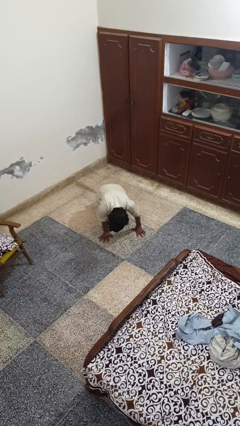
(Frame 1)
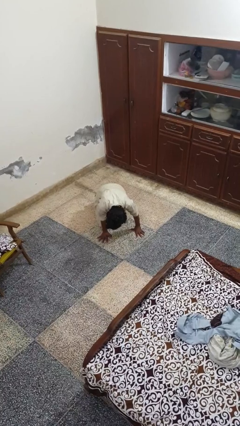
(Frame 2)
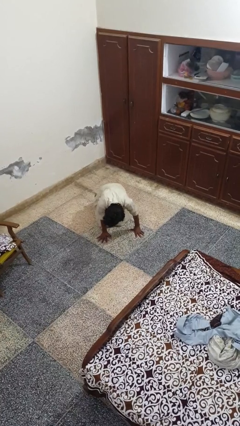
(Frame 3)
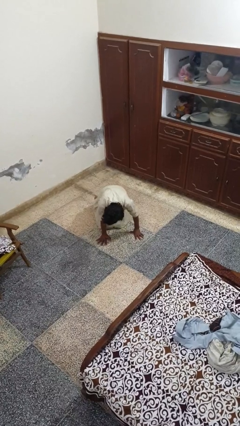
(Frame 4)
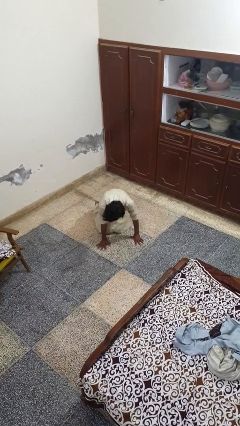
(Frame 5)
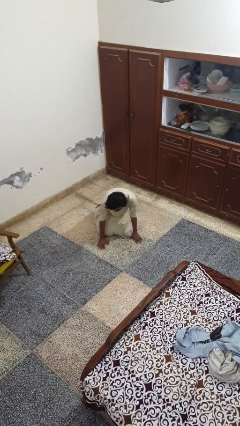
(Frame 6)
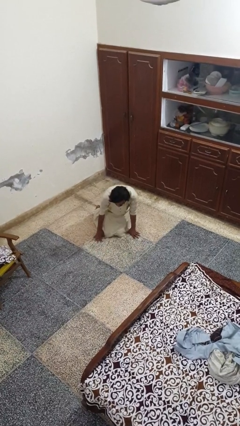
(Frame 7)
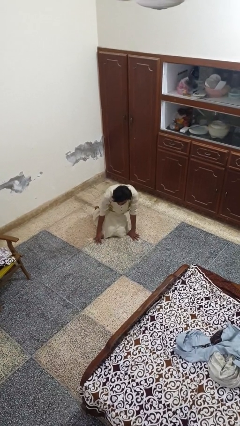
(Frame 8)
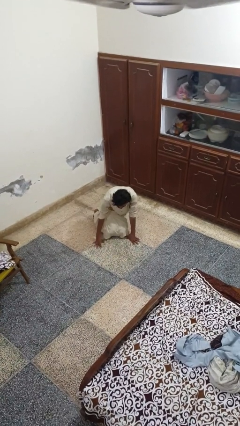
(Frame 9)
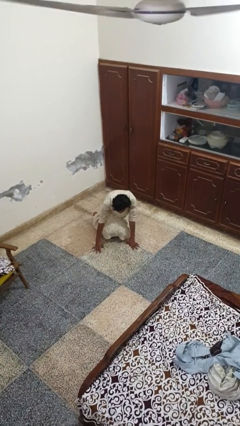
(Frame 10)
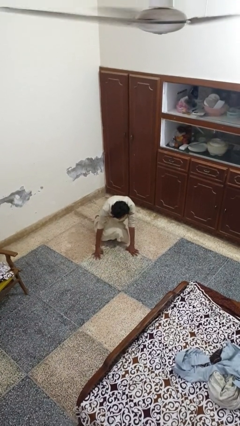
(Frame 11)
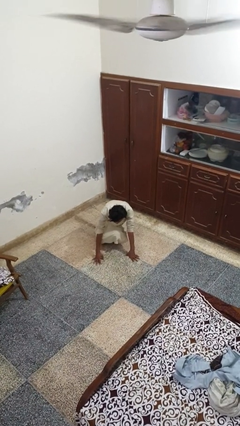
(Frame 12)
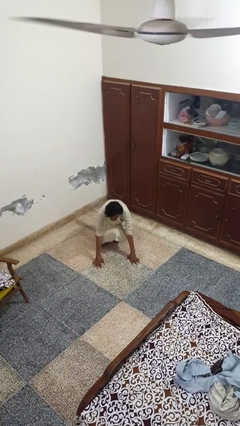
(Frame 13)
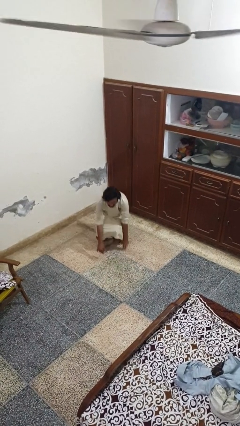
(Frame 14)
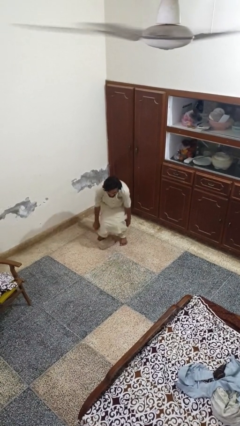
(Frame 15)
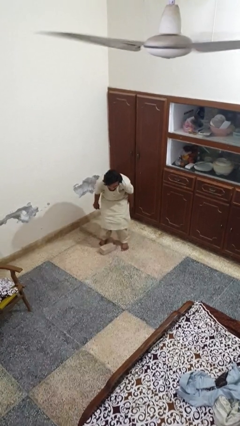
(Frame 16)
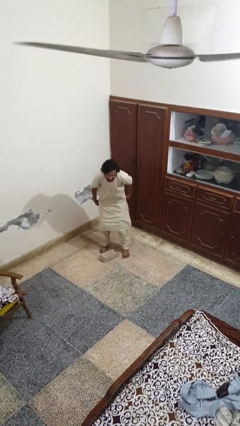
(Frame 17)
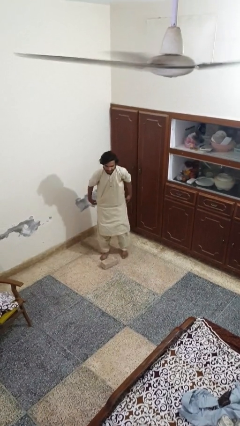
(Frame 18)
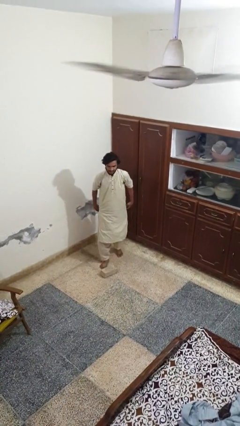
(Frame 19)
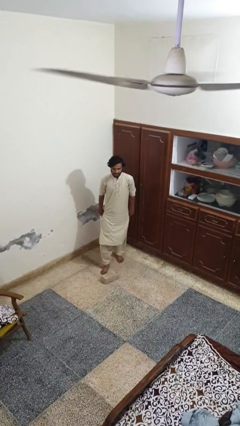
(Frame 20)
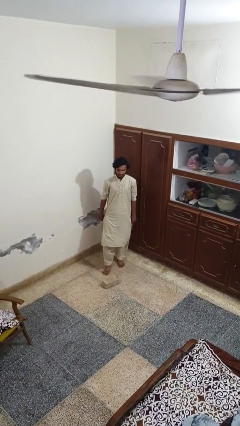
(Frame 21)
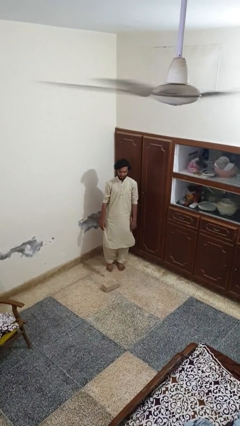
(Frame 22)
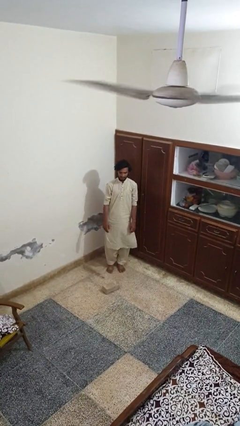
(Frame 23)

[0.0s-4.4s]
person stands up from floor

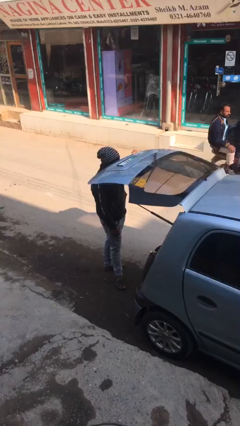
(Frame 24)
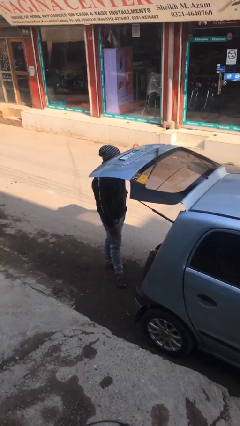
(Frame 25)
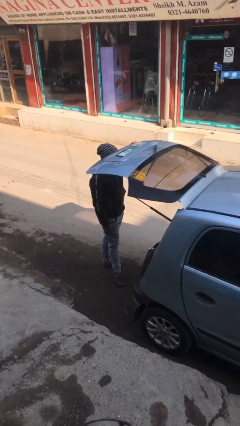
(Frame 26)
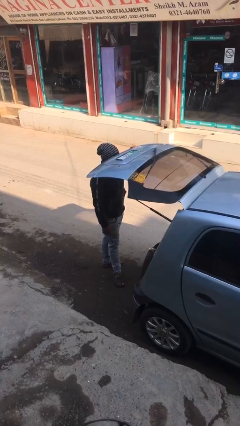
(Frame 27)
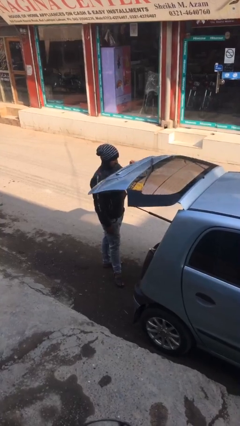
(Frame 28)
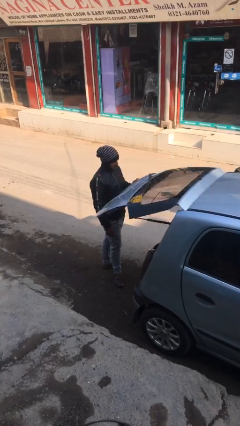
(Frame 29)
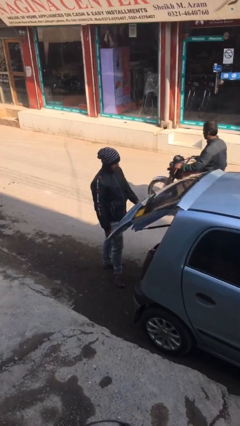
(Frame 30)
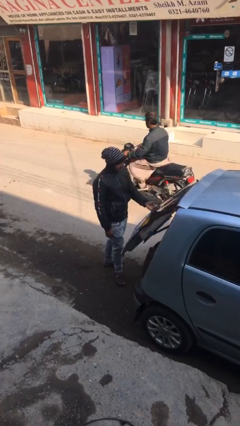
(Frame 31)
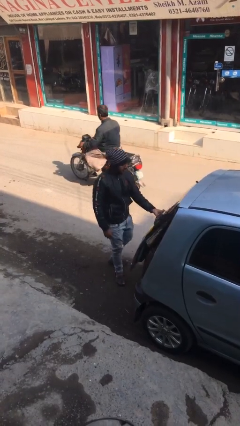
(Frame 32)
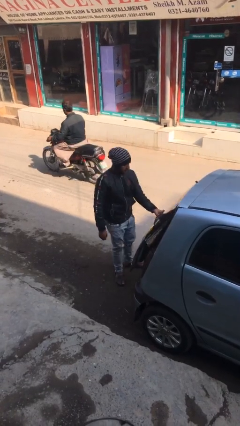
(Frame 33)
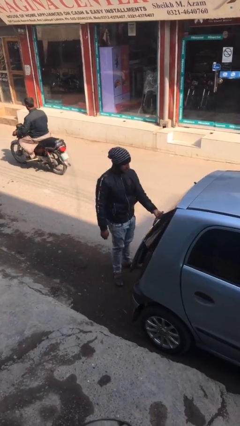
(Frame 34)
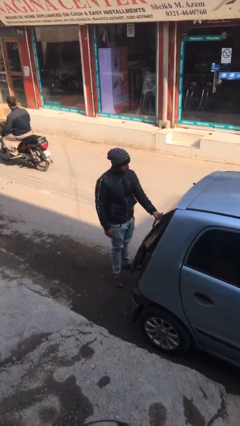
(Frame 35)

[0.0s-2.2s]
person closes car trunk

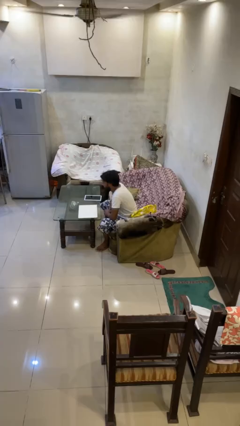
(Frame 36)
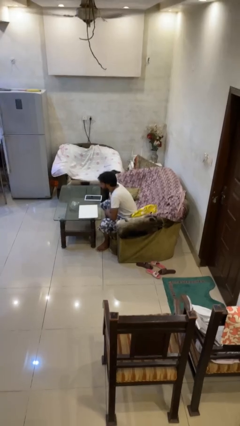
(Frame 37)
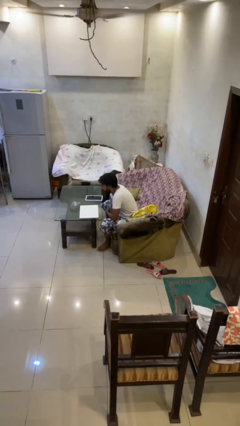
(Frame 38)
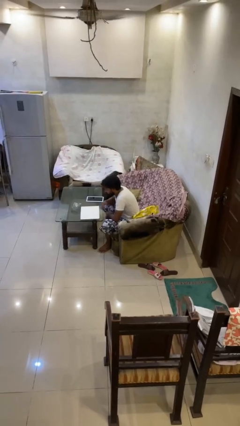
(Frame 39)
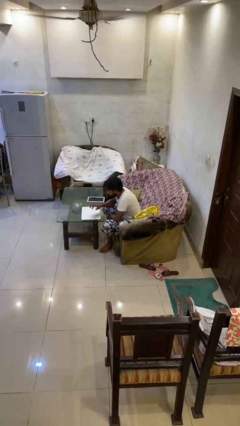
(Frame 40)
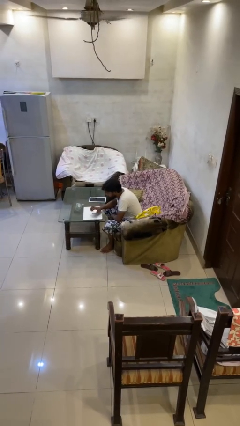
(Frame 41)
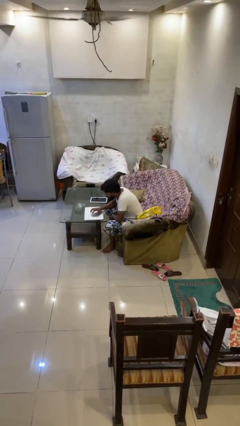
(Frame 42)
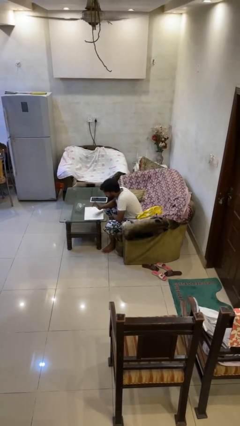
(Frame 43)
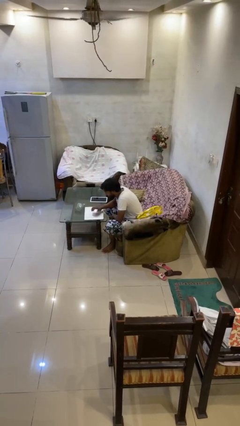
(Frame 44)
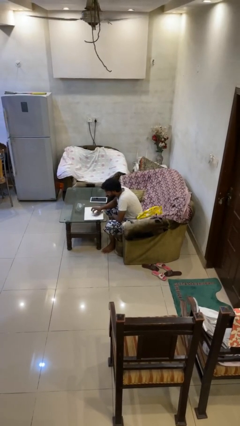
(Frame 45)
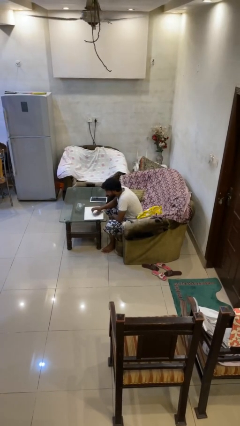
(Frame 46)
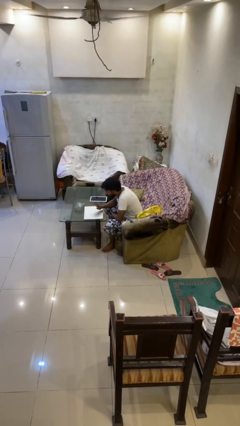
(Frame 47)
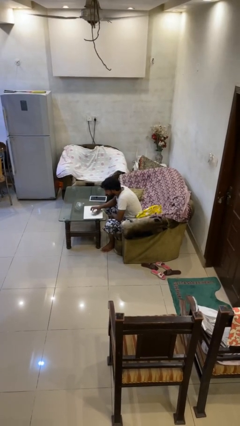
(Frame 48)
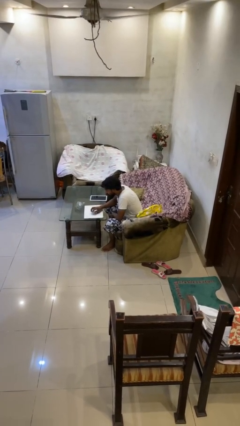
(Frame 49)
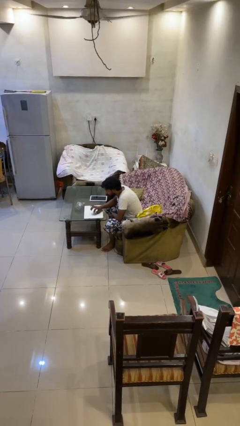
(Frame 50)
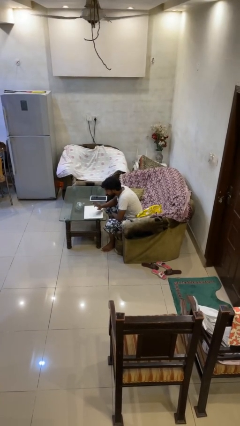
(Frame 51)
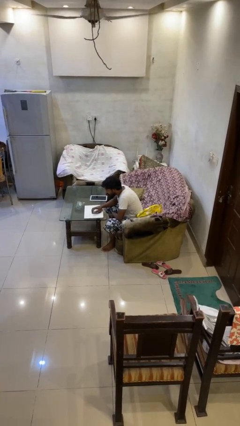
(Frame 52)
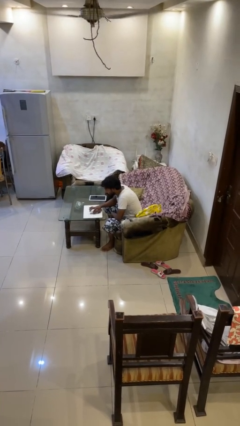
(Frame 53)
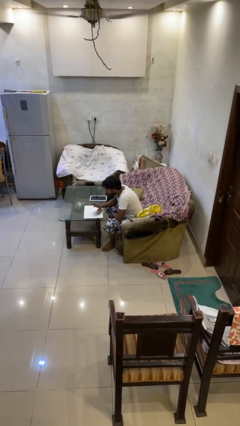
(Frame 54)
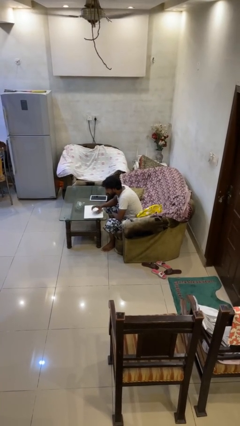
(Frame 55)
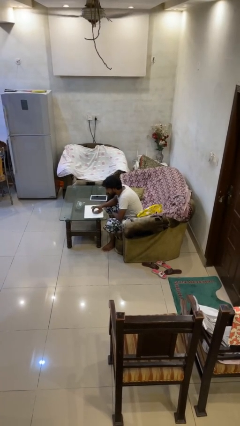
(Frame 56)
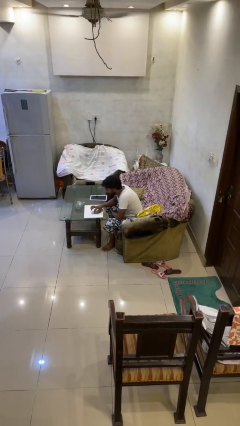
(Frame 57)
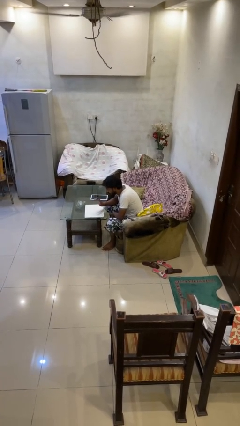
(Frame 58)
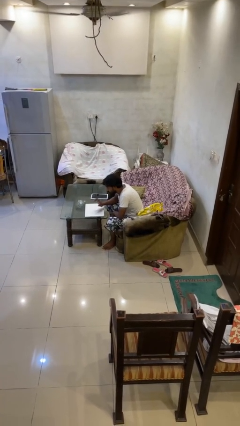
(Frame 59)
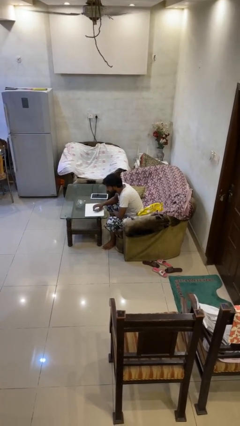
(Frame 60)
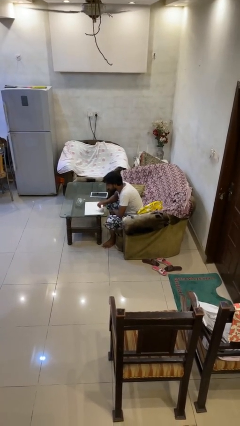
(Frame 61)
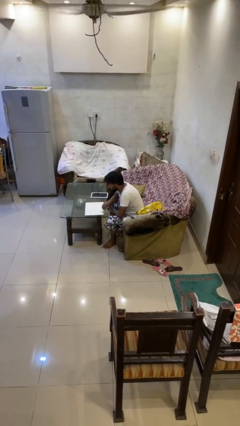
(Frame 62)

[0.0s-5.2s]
person taps object with finger

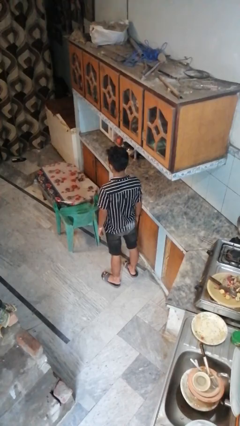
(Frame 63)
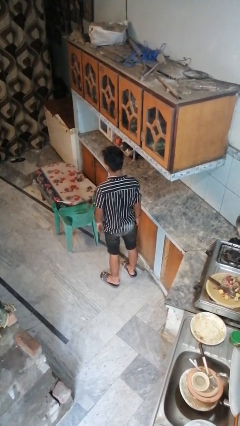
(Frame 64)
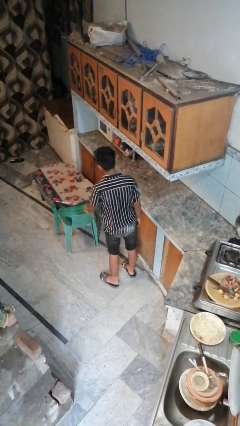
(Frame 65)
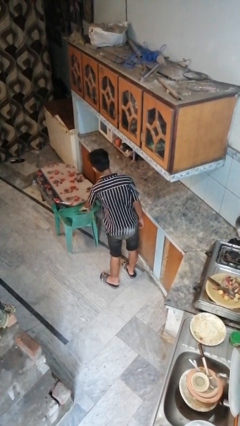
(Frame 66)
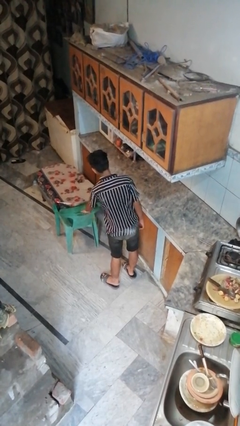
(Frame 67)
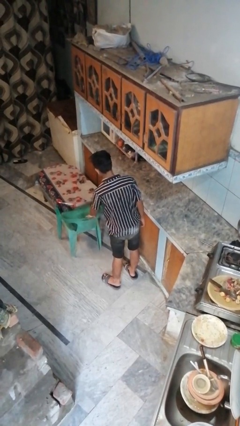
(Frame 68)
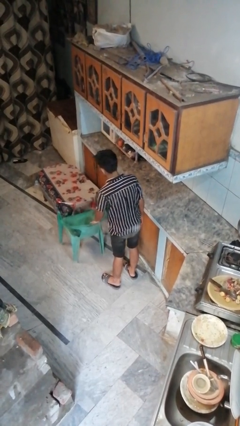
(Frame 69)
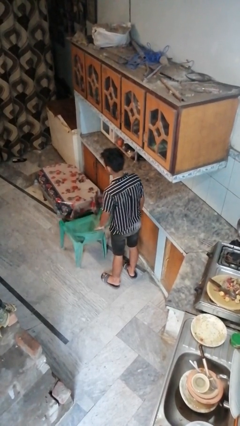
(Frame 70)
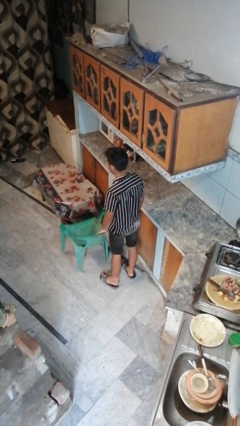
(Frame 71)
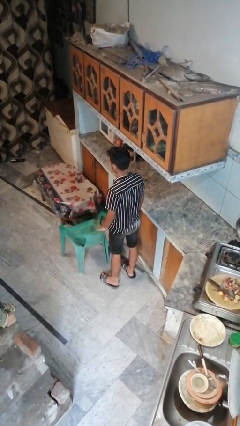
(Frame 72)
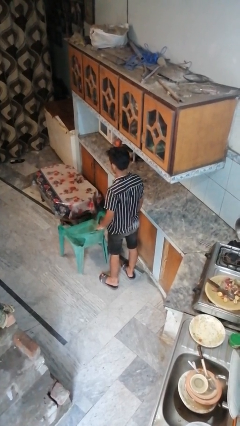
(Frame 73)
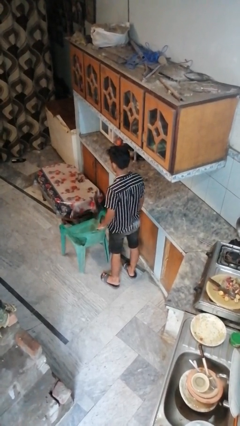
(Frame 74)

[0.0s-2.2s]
person pulls out chair

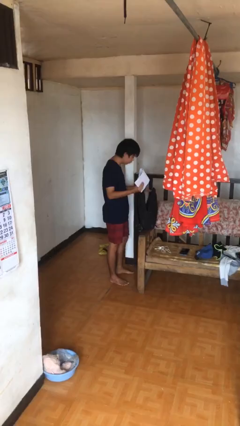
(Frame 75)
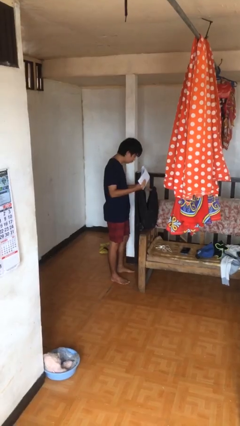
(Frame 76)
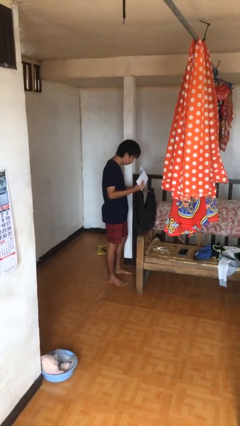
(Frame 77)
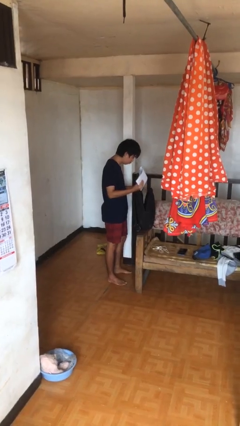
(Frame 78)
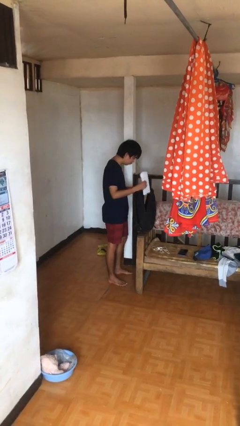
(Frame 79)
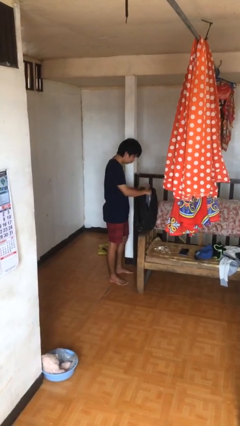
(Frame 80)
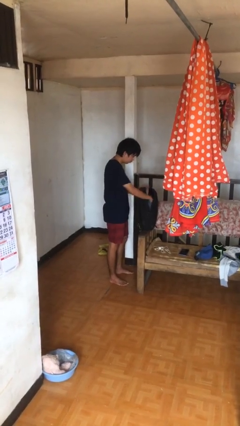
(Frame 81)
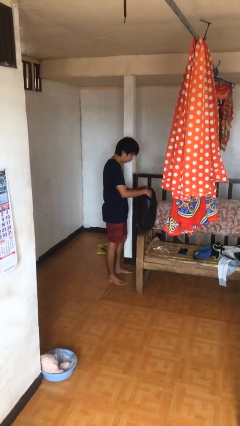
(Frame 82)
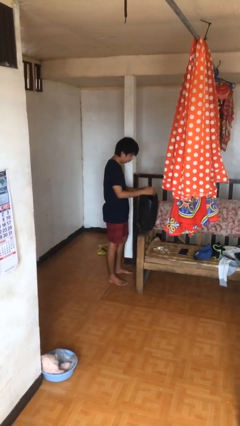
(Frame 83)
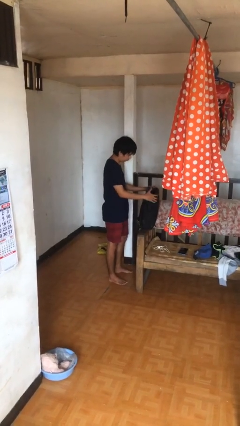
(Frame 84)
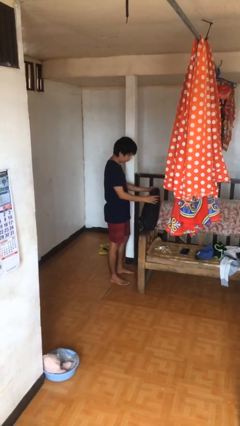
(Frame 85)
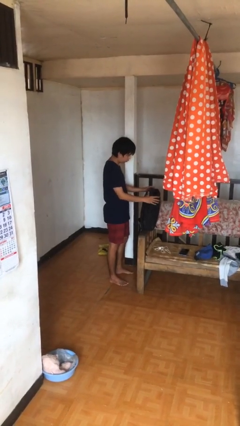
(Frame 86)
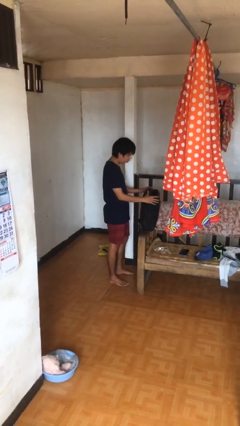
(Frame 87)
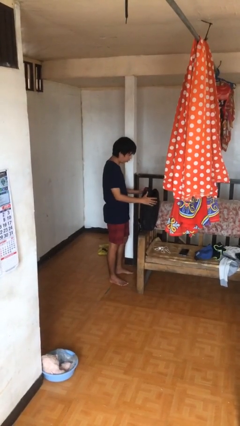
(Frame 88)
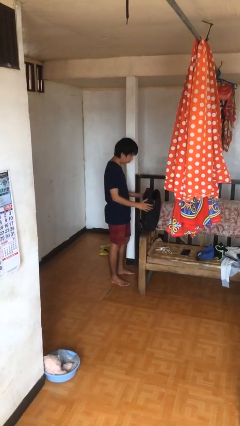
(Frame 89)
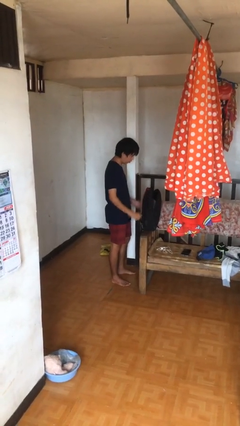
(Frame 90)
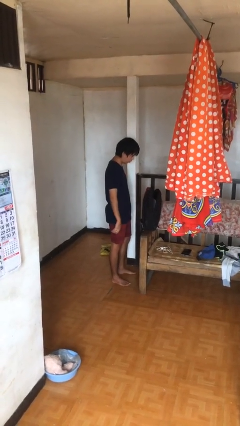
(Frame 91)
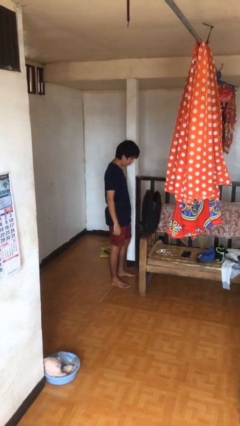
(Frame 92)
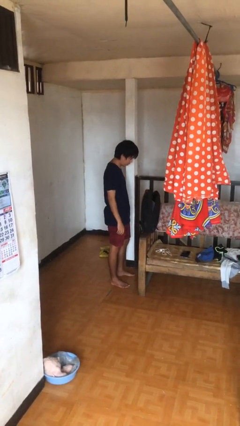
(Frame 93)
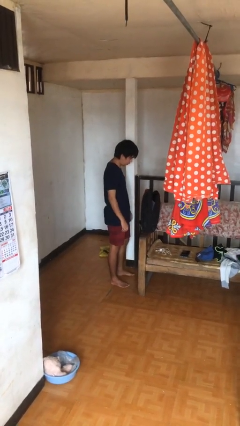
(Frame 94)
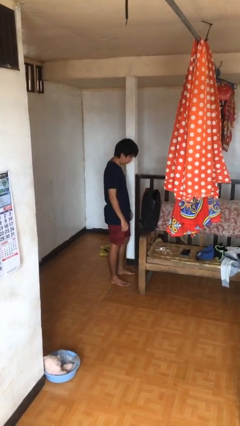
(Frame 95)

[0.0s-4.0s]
person puts object into backpack
